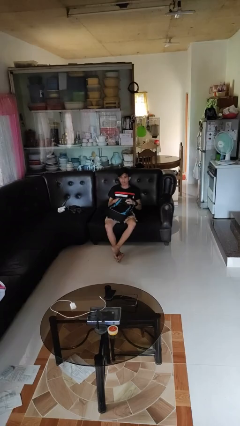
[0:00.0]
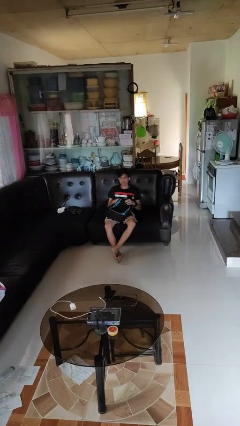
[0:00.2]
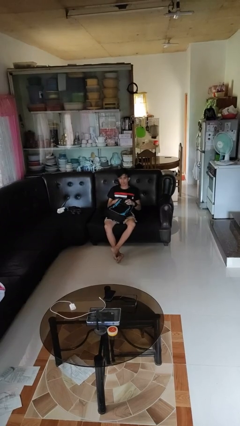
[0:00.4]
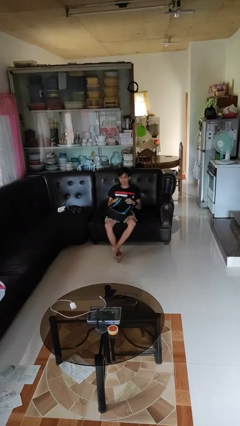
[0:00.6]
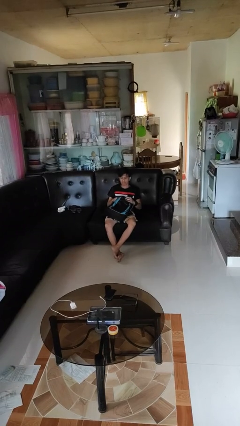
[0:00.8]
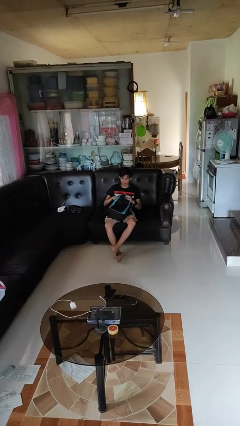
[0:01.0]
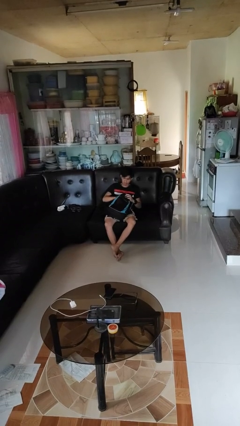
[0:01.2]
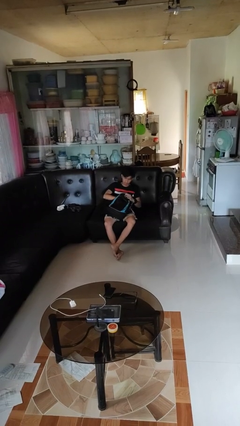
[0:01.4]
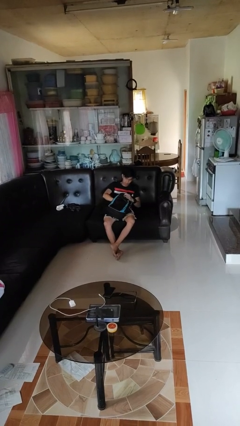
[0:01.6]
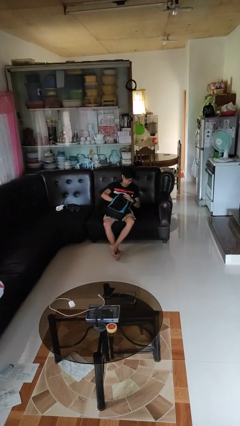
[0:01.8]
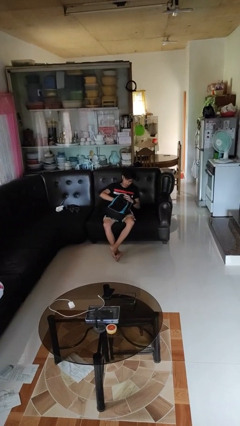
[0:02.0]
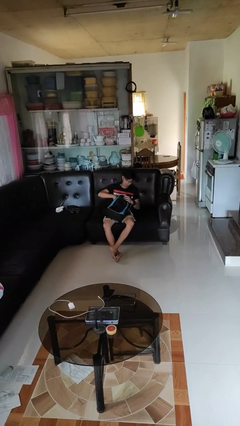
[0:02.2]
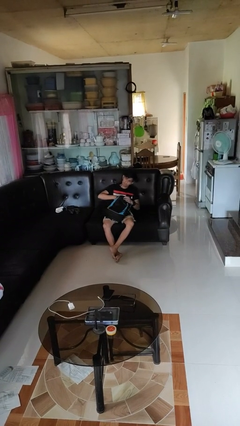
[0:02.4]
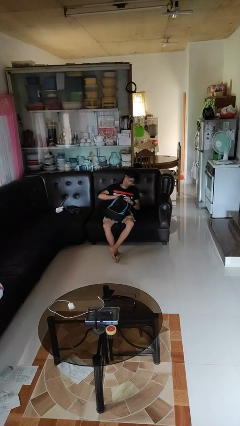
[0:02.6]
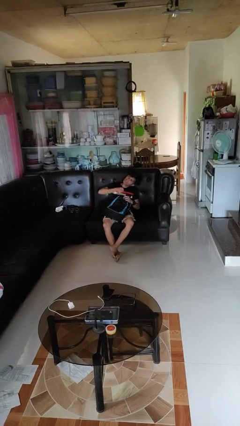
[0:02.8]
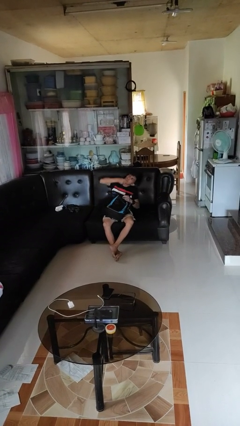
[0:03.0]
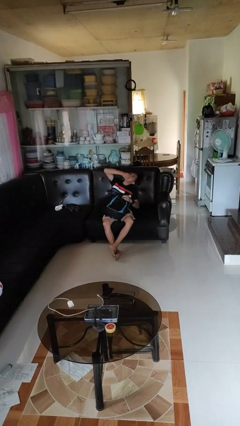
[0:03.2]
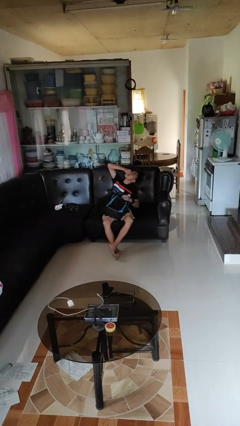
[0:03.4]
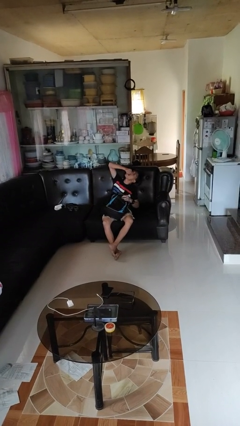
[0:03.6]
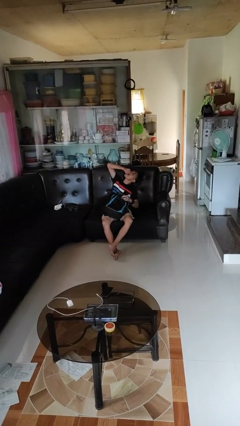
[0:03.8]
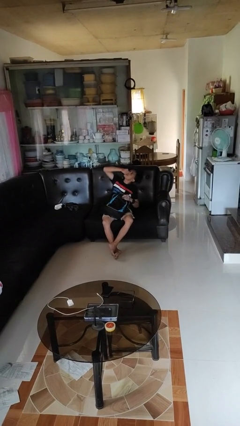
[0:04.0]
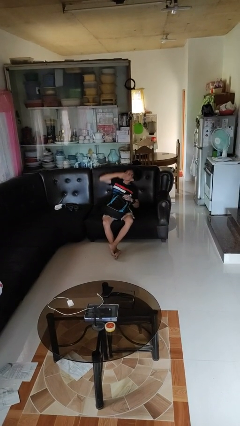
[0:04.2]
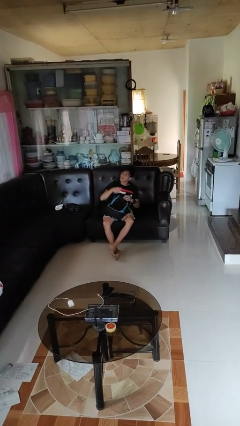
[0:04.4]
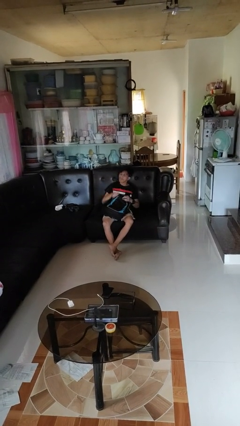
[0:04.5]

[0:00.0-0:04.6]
person eats snack from bag

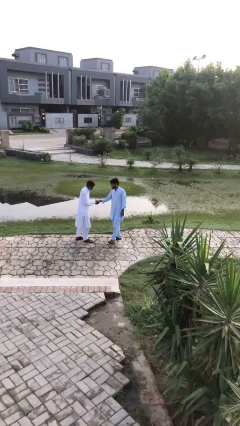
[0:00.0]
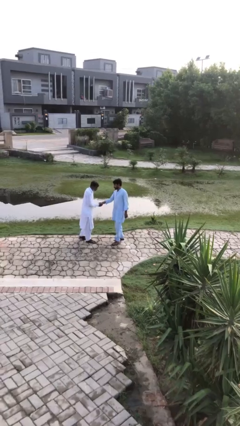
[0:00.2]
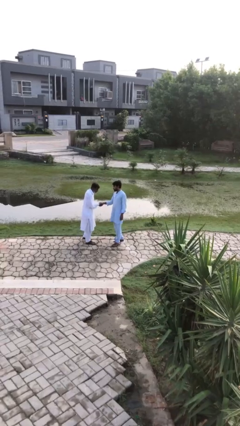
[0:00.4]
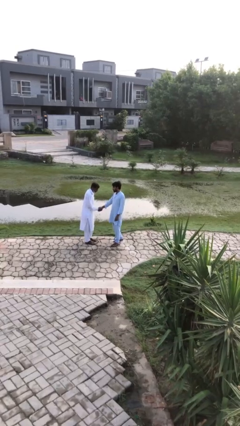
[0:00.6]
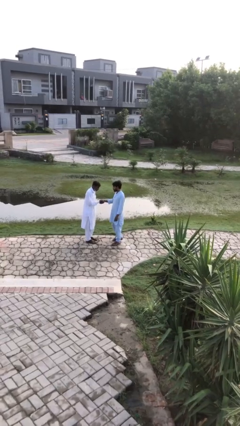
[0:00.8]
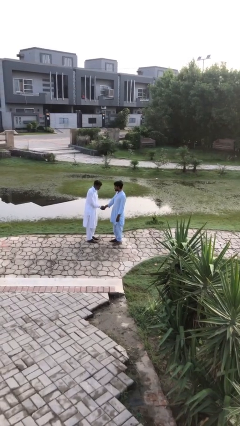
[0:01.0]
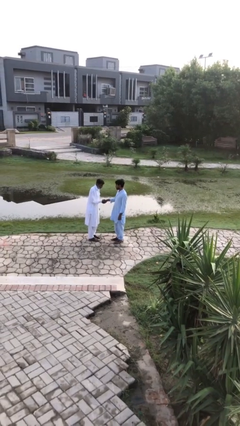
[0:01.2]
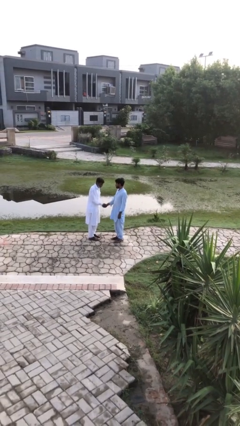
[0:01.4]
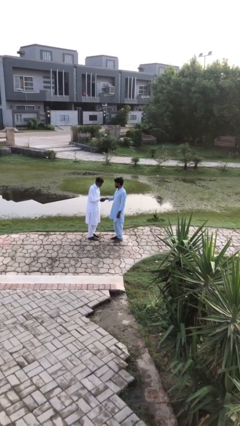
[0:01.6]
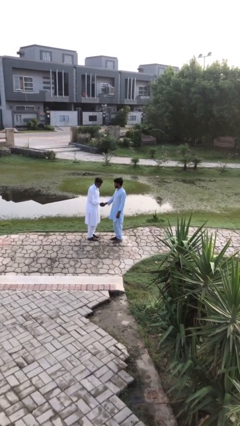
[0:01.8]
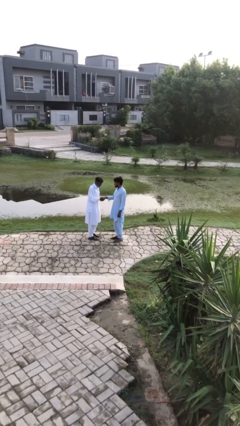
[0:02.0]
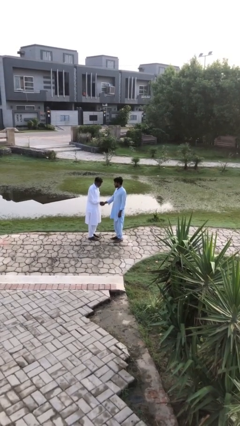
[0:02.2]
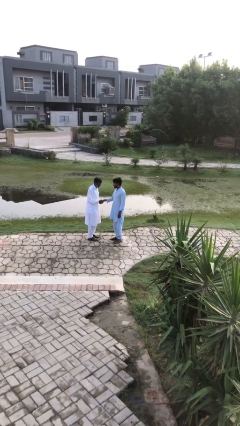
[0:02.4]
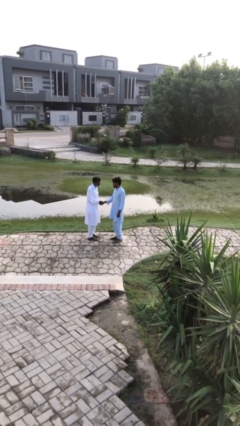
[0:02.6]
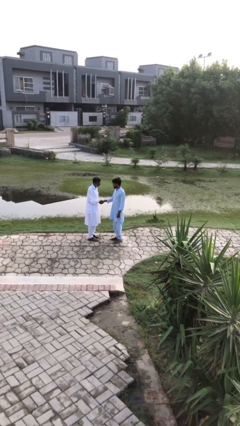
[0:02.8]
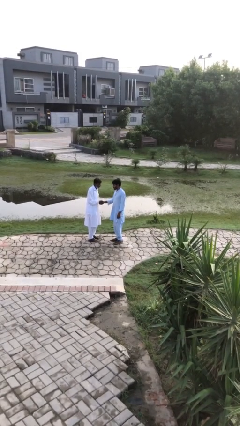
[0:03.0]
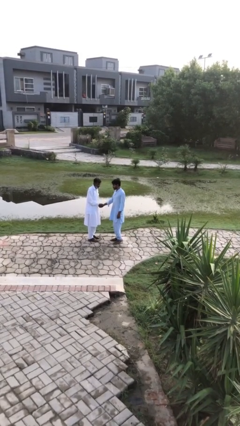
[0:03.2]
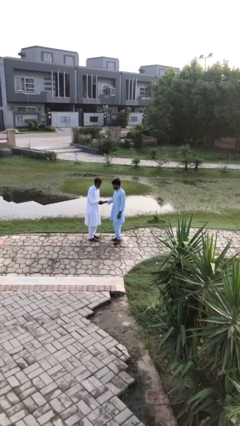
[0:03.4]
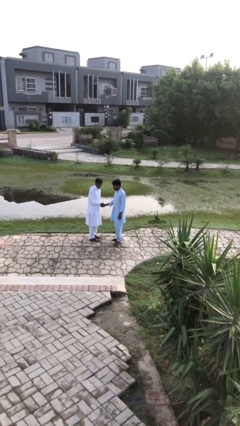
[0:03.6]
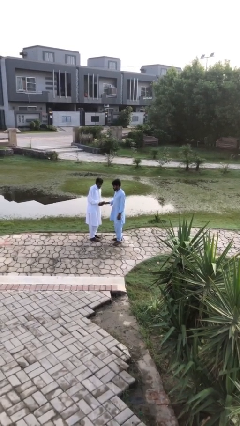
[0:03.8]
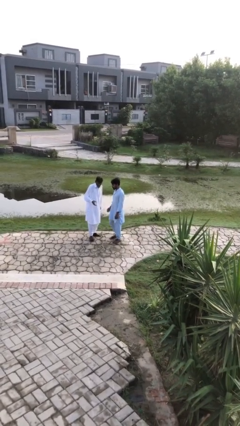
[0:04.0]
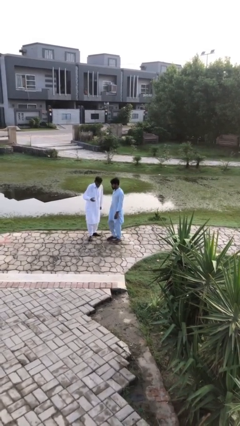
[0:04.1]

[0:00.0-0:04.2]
person shakes hand

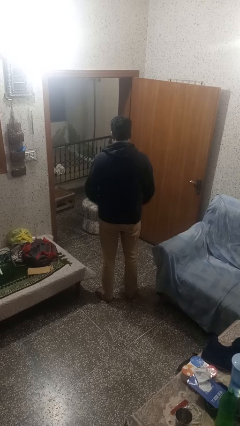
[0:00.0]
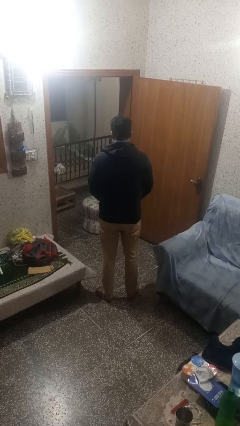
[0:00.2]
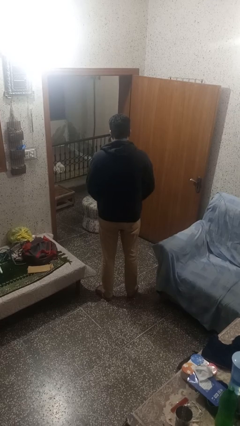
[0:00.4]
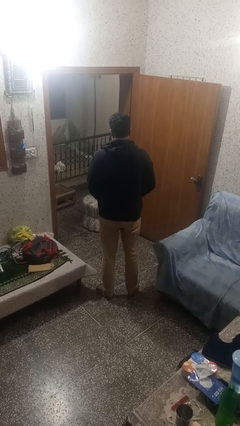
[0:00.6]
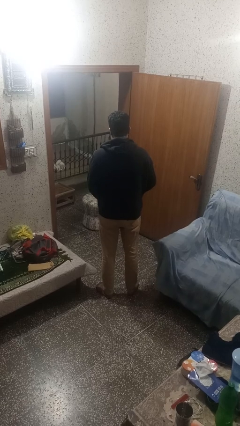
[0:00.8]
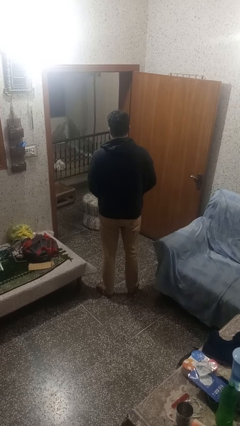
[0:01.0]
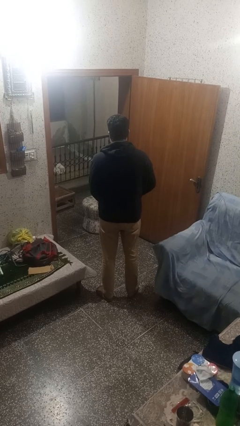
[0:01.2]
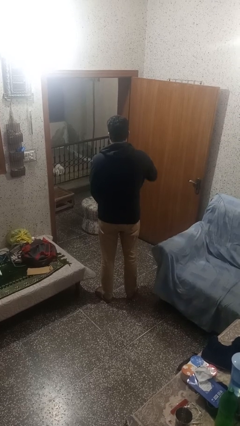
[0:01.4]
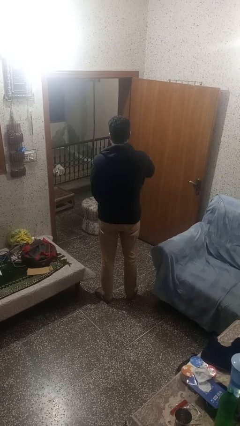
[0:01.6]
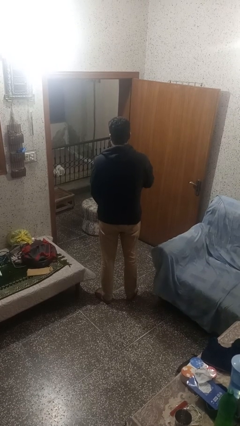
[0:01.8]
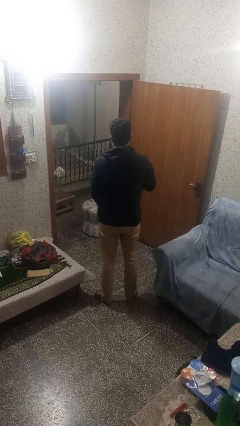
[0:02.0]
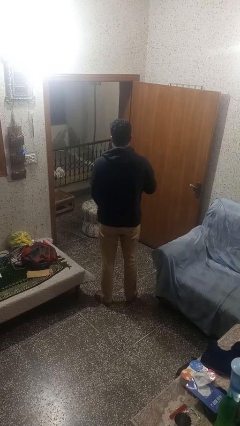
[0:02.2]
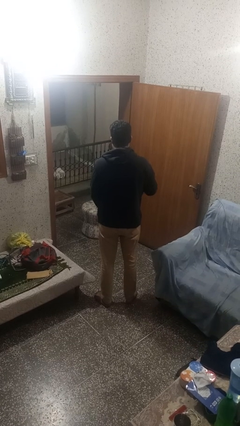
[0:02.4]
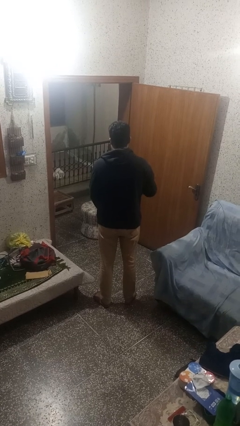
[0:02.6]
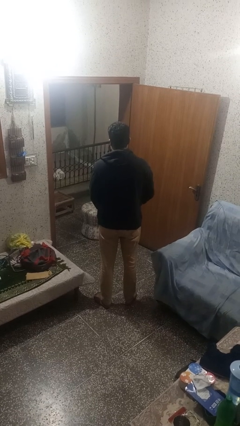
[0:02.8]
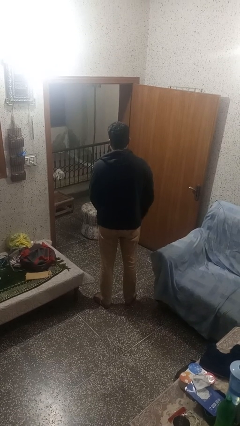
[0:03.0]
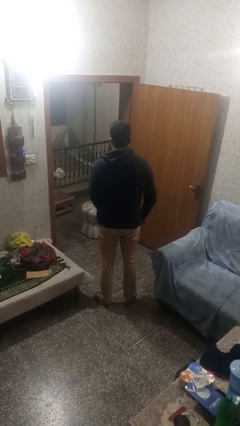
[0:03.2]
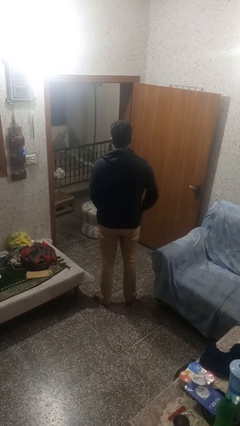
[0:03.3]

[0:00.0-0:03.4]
person zips up jacket

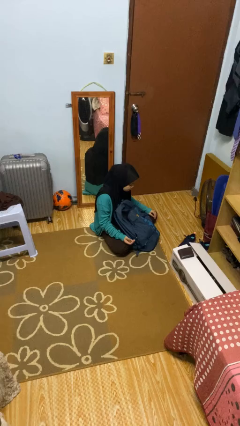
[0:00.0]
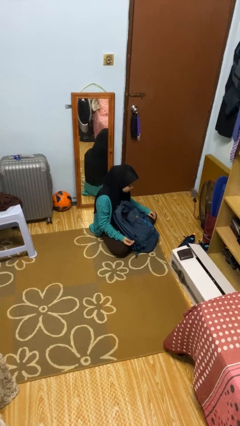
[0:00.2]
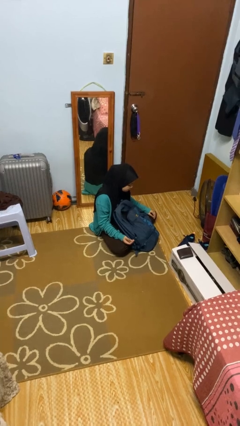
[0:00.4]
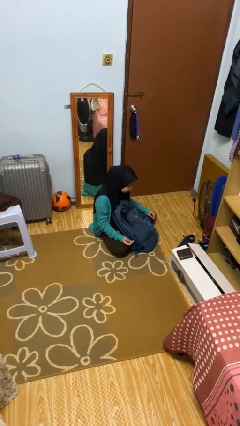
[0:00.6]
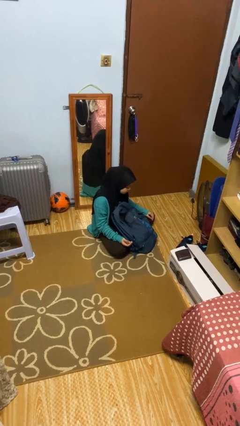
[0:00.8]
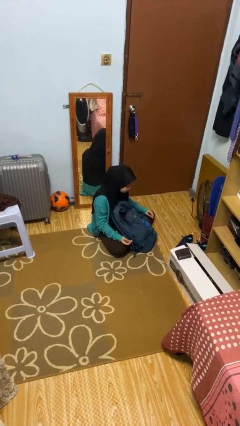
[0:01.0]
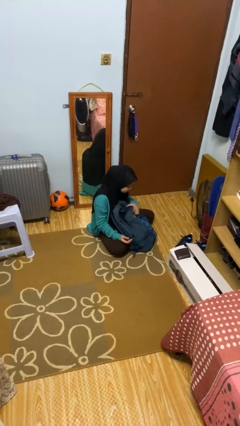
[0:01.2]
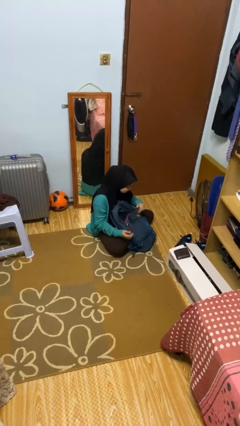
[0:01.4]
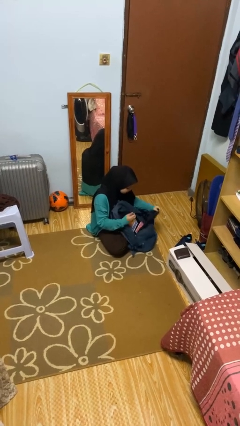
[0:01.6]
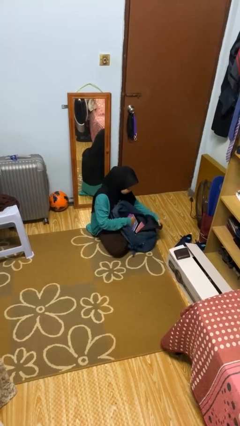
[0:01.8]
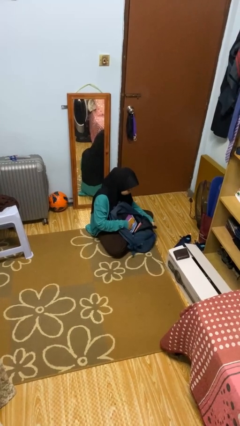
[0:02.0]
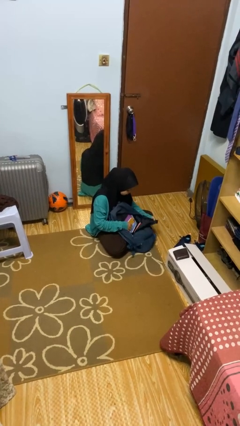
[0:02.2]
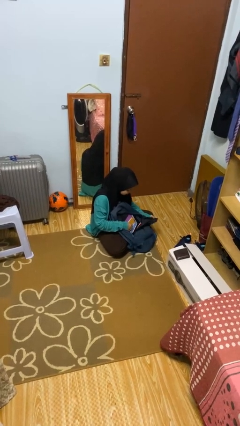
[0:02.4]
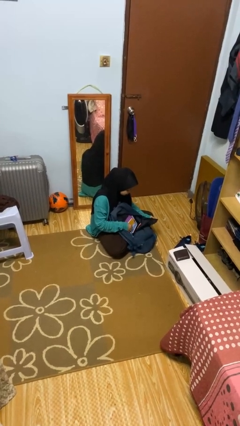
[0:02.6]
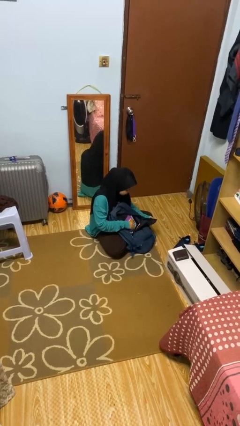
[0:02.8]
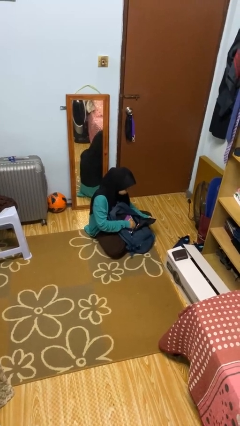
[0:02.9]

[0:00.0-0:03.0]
person searches in backpack

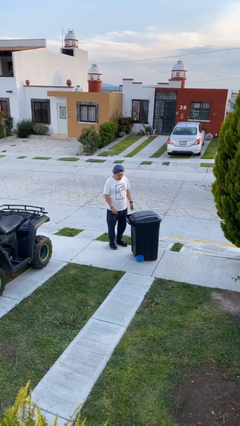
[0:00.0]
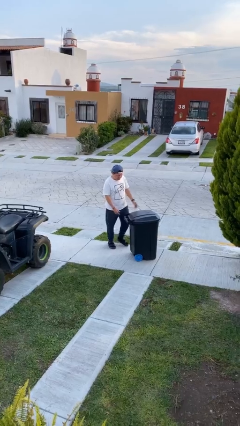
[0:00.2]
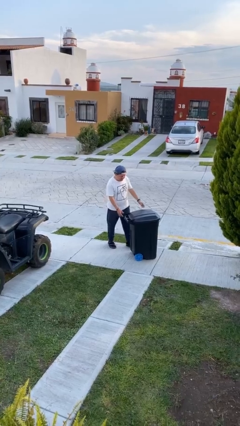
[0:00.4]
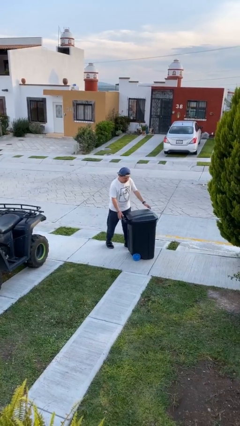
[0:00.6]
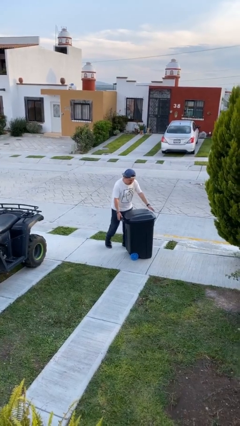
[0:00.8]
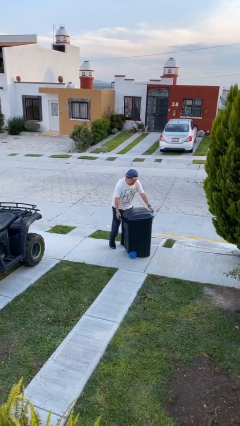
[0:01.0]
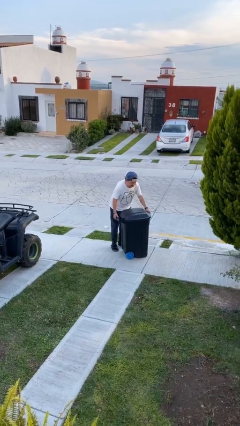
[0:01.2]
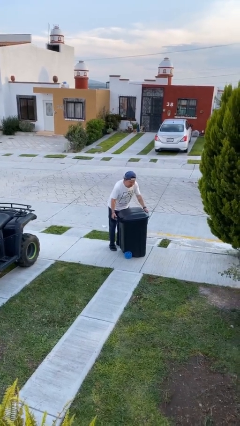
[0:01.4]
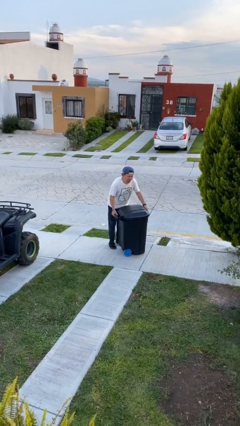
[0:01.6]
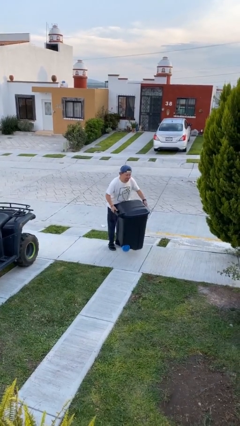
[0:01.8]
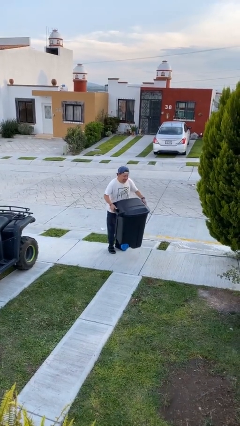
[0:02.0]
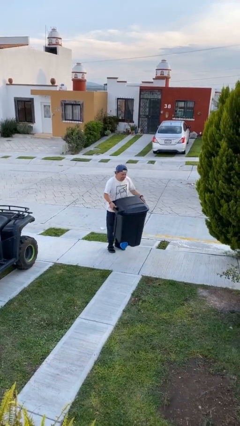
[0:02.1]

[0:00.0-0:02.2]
person picks up object from floor
